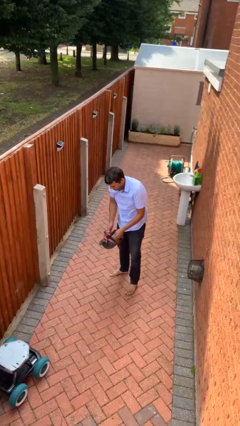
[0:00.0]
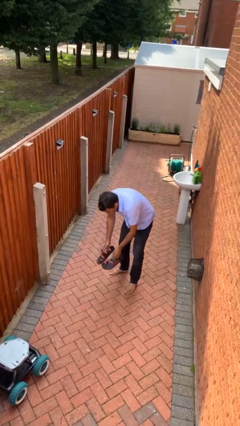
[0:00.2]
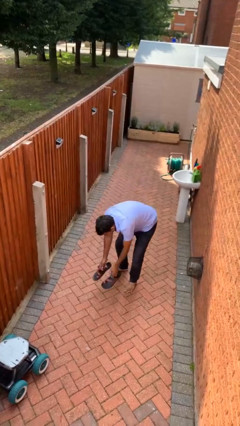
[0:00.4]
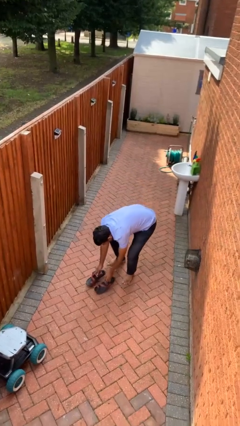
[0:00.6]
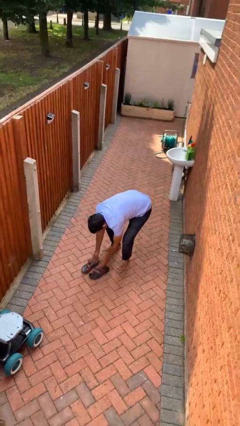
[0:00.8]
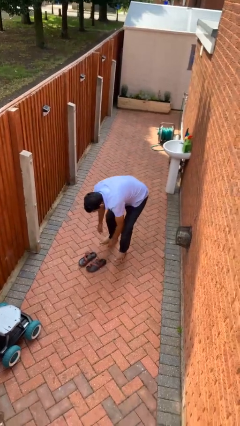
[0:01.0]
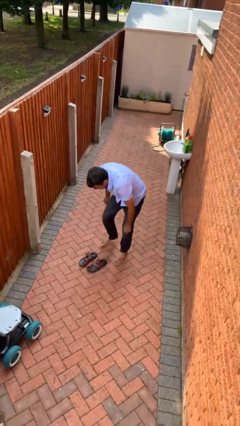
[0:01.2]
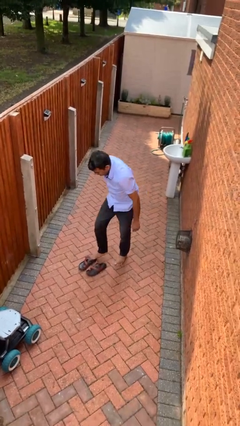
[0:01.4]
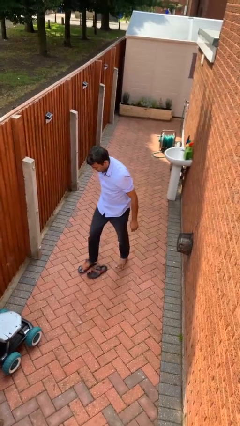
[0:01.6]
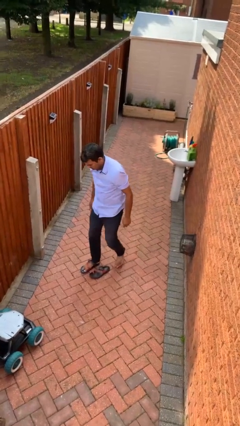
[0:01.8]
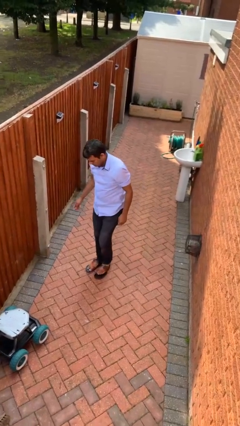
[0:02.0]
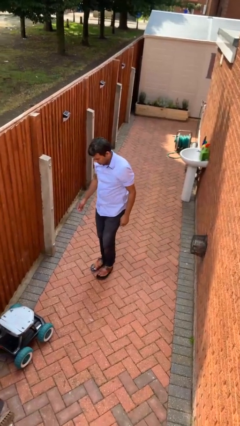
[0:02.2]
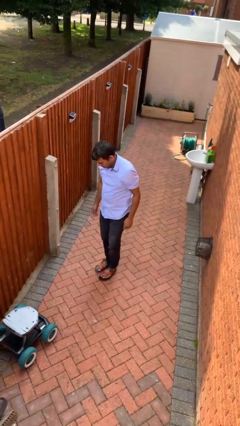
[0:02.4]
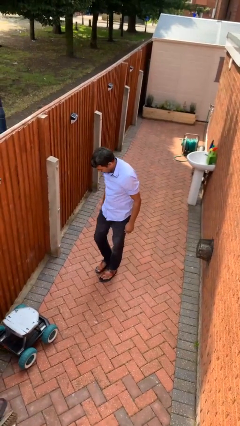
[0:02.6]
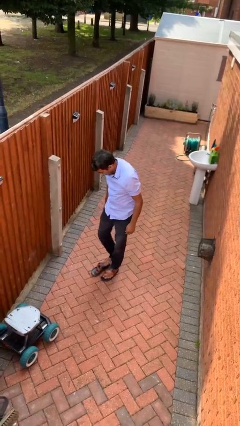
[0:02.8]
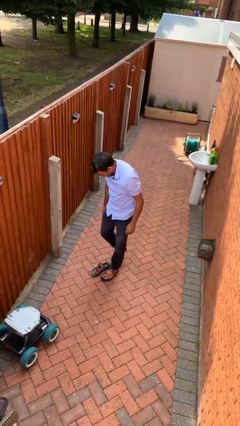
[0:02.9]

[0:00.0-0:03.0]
person puts on shoes

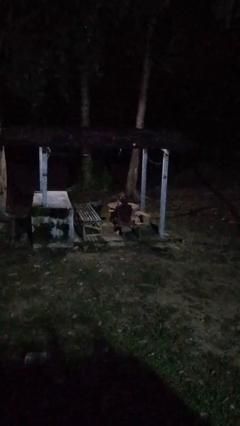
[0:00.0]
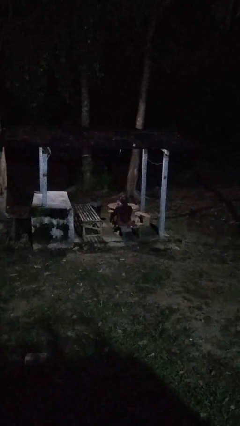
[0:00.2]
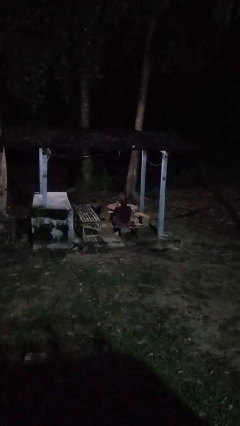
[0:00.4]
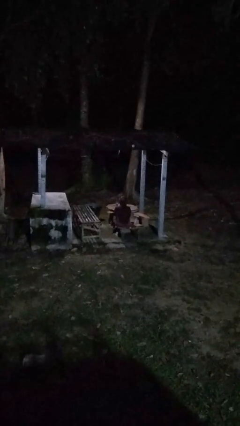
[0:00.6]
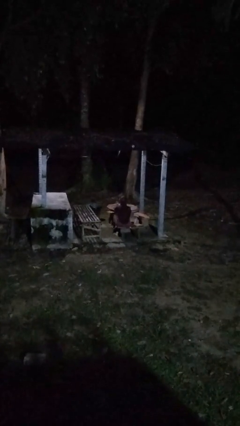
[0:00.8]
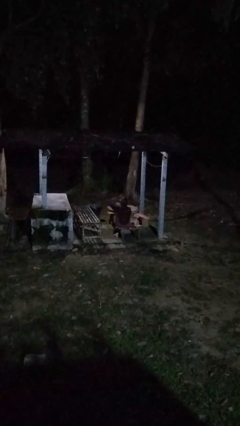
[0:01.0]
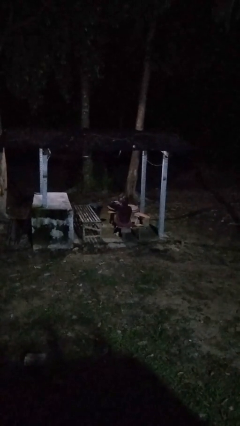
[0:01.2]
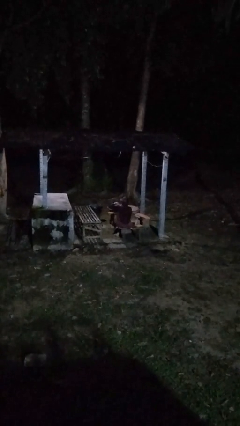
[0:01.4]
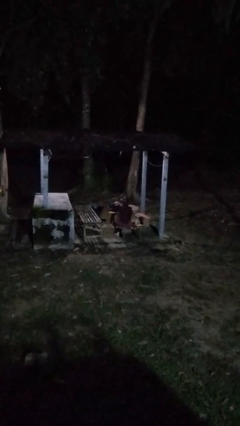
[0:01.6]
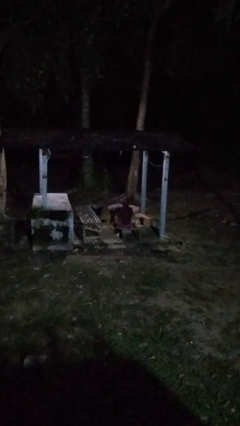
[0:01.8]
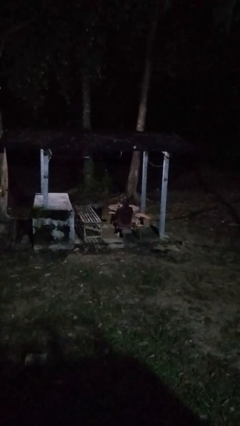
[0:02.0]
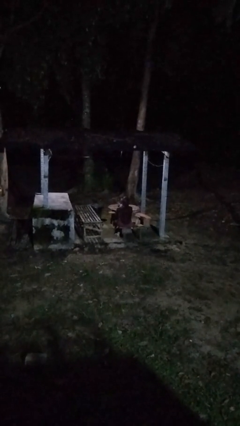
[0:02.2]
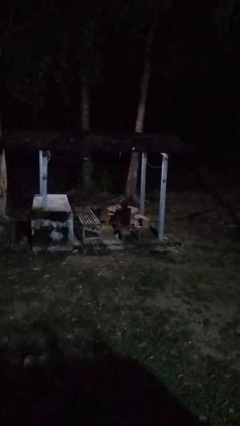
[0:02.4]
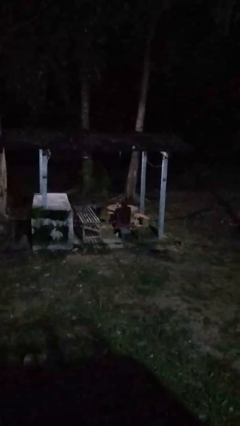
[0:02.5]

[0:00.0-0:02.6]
person gestures cut

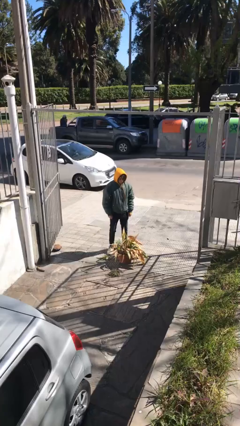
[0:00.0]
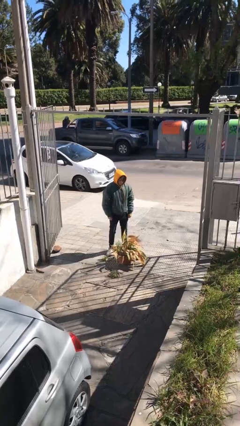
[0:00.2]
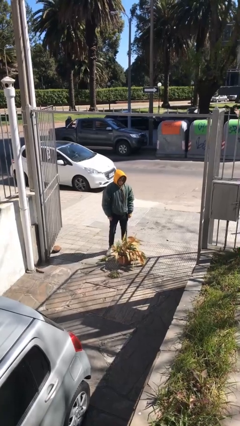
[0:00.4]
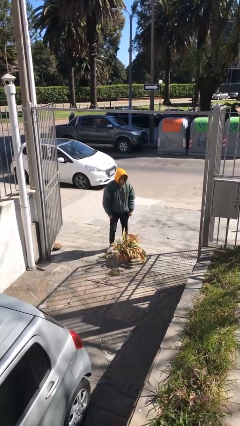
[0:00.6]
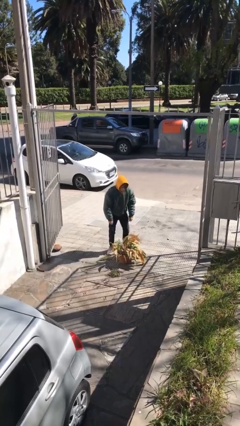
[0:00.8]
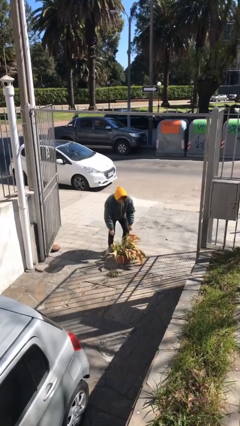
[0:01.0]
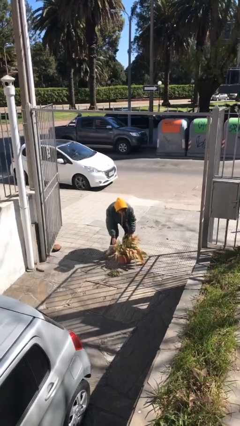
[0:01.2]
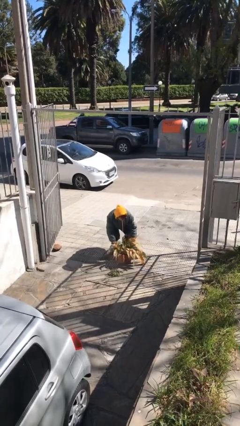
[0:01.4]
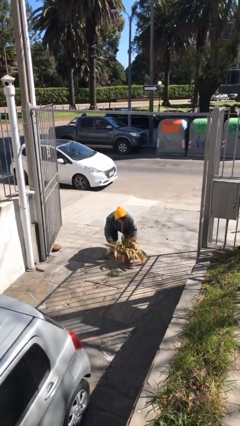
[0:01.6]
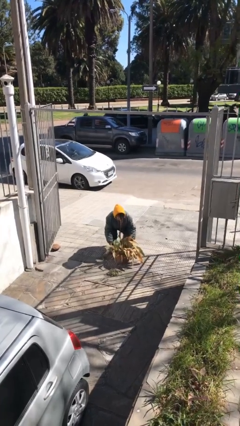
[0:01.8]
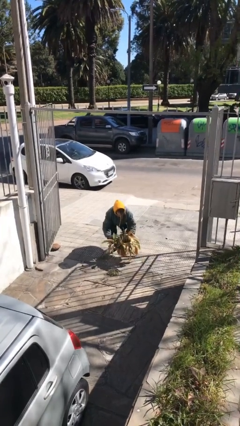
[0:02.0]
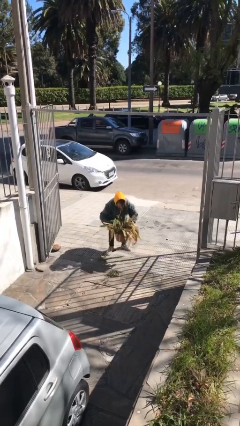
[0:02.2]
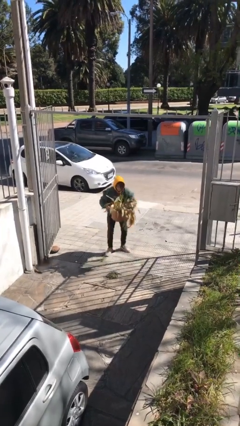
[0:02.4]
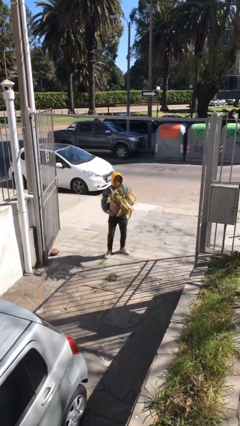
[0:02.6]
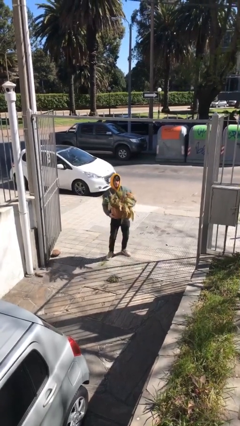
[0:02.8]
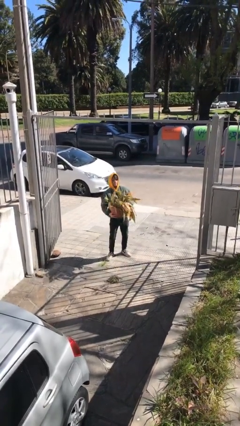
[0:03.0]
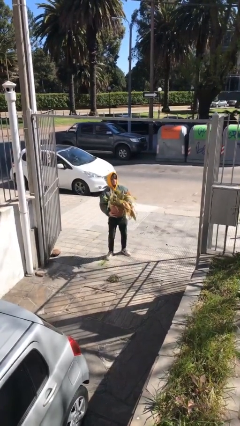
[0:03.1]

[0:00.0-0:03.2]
person picks up object from floor

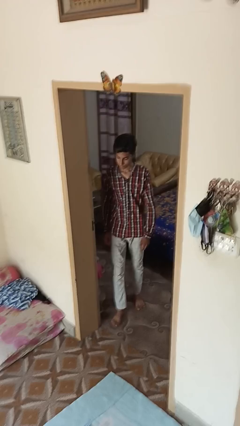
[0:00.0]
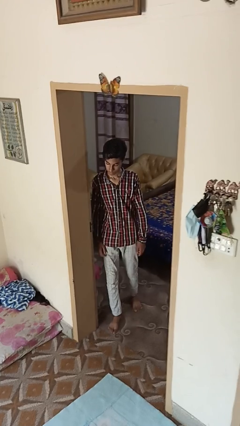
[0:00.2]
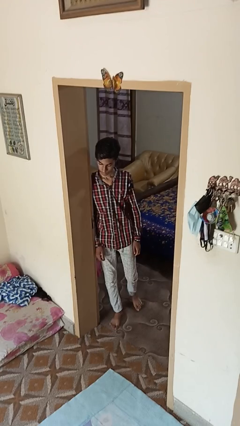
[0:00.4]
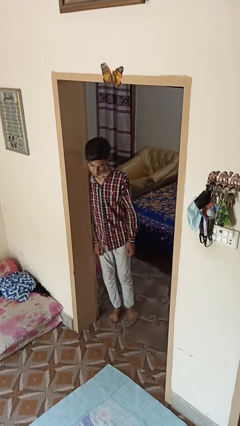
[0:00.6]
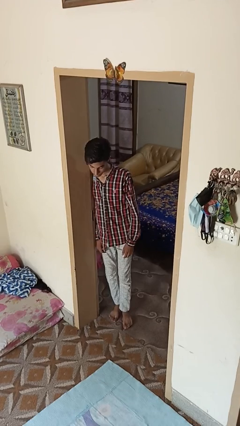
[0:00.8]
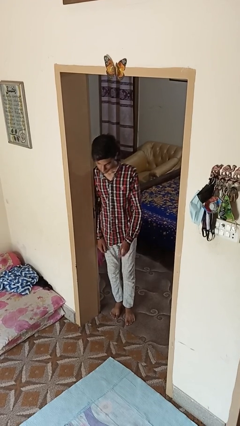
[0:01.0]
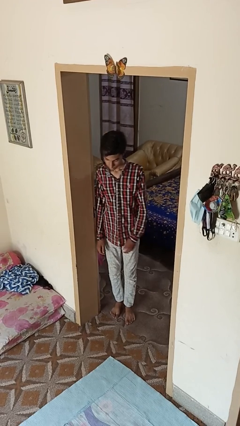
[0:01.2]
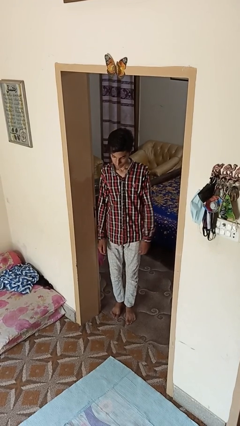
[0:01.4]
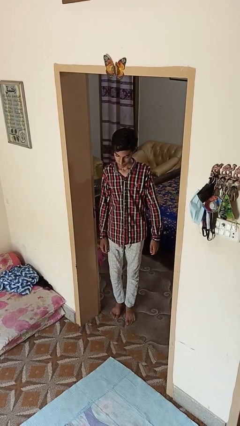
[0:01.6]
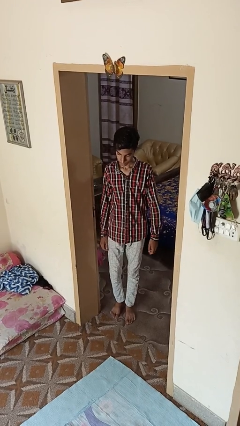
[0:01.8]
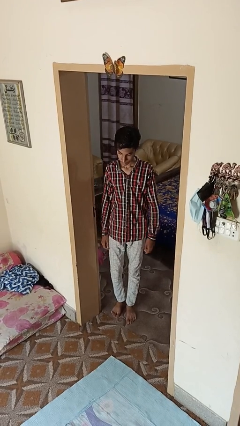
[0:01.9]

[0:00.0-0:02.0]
person bumps into wall

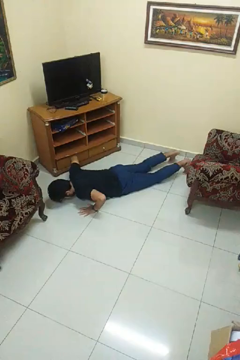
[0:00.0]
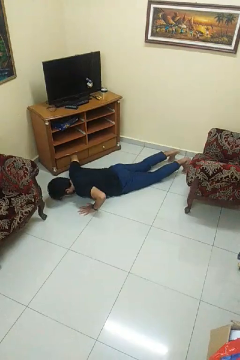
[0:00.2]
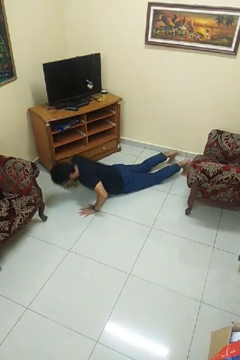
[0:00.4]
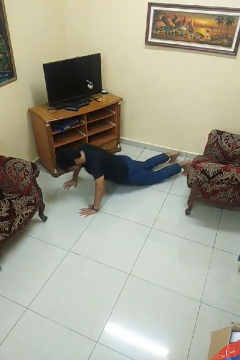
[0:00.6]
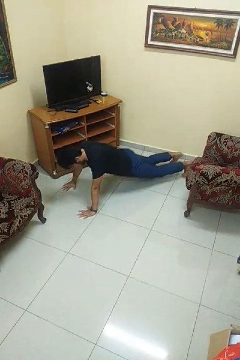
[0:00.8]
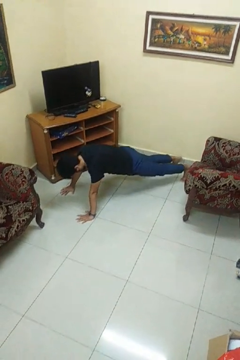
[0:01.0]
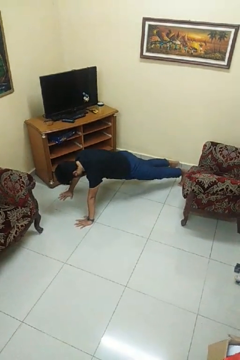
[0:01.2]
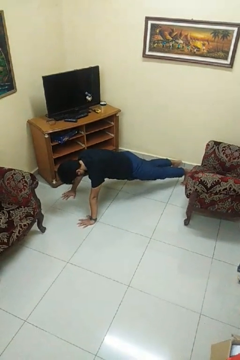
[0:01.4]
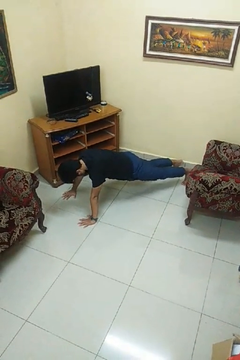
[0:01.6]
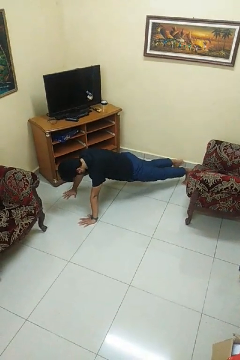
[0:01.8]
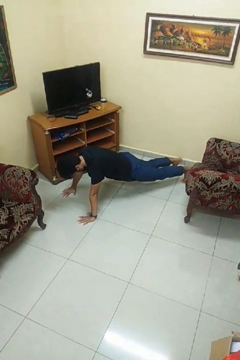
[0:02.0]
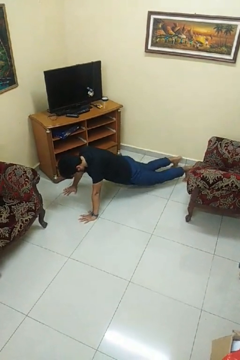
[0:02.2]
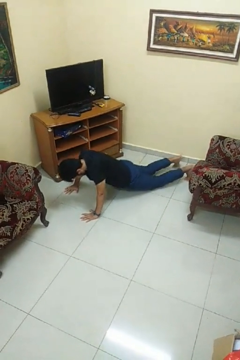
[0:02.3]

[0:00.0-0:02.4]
person exercises with pushup

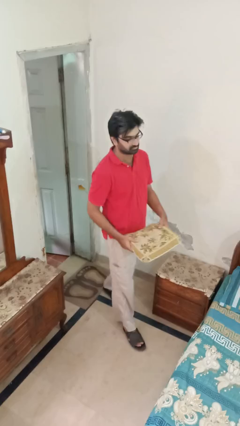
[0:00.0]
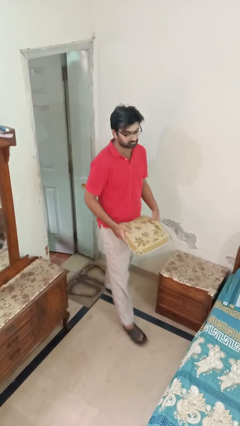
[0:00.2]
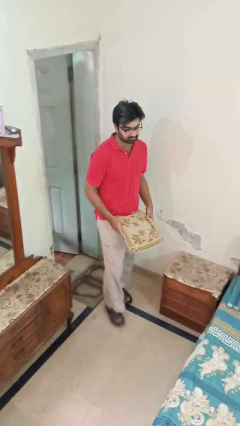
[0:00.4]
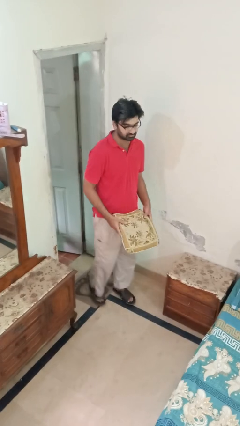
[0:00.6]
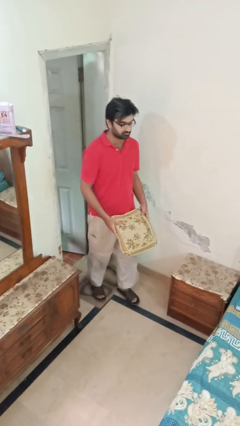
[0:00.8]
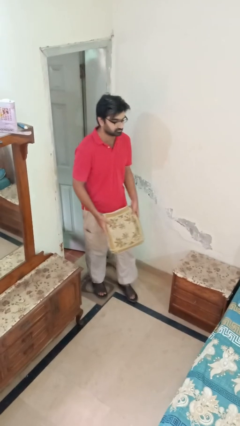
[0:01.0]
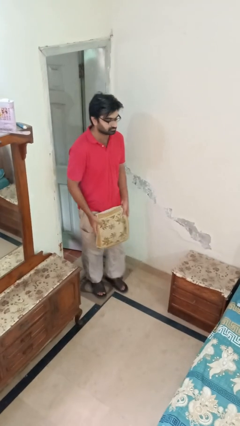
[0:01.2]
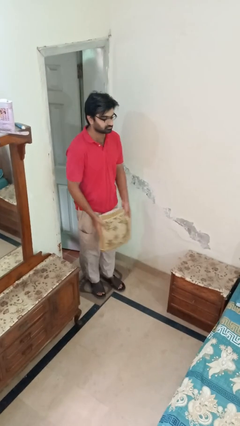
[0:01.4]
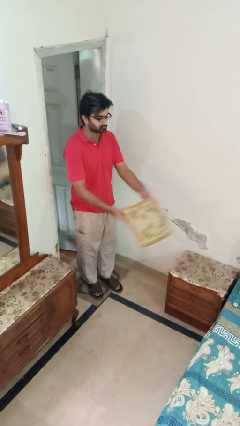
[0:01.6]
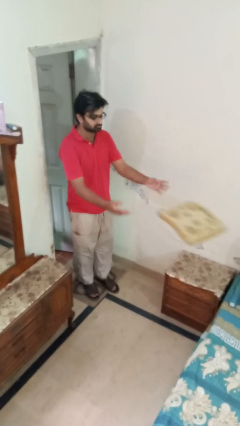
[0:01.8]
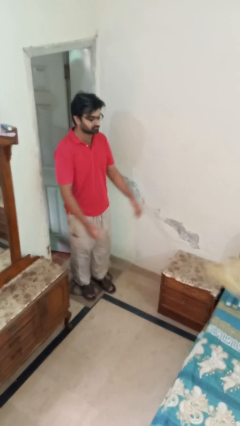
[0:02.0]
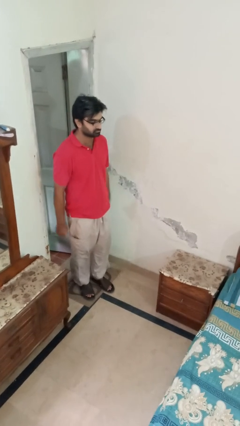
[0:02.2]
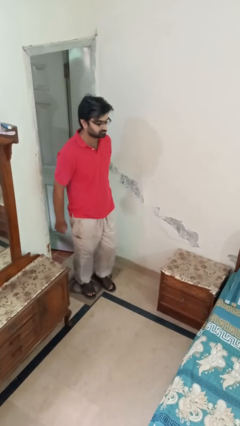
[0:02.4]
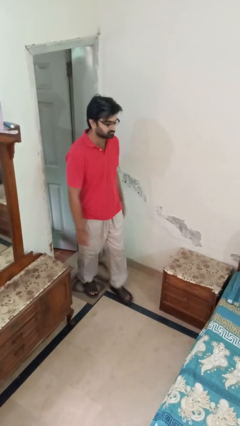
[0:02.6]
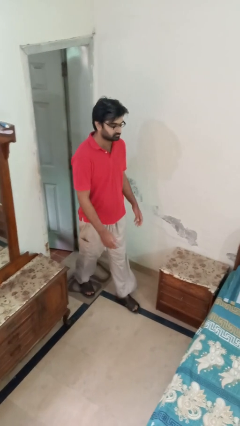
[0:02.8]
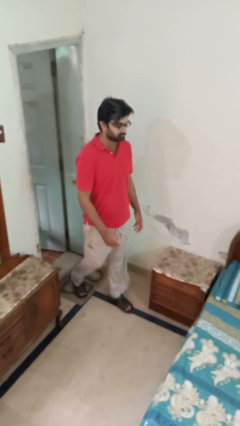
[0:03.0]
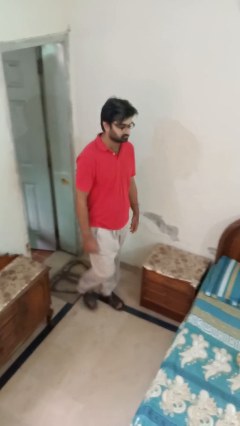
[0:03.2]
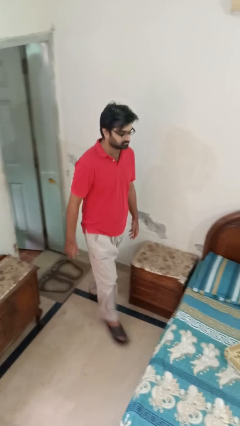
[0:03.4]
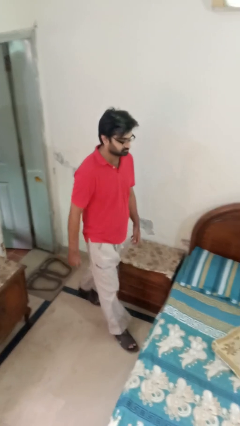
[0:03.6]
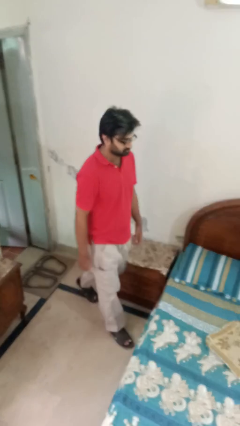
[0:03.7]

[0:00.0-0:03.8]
person throws object on bed

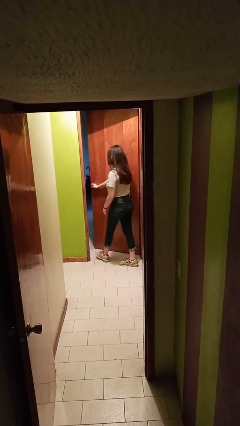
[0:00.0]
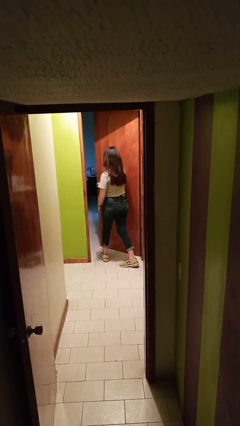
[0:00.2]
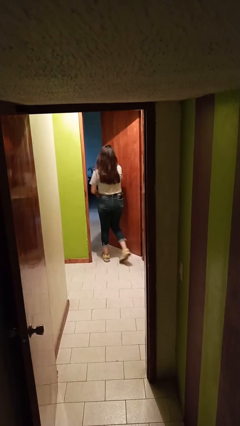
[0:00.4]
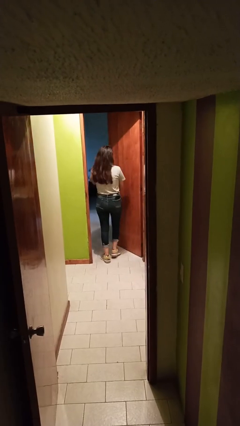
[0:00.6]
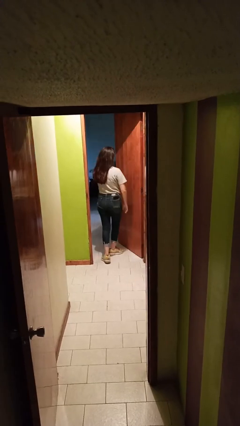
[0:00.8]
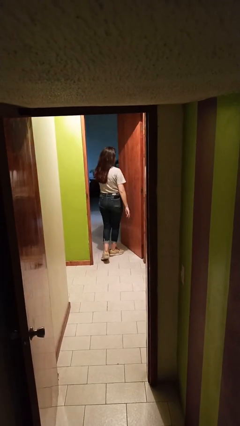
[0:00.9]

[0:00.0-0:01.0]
person opens facility door
